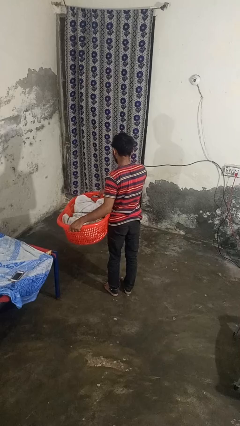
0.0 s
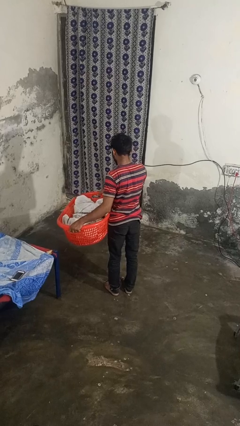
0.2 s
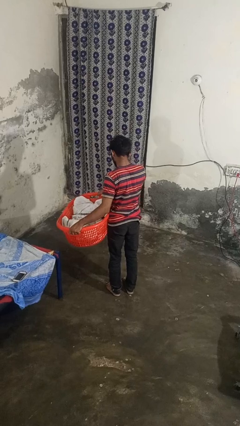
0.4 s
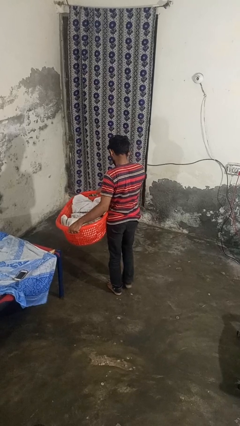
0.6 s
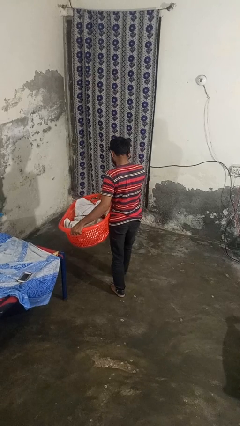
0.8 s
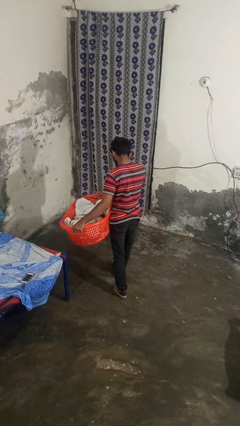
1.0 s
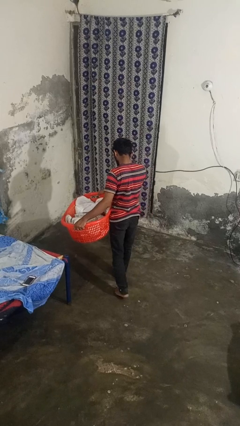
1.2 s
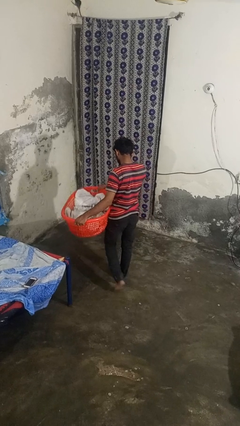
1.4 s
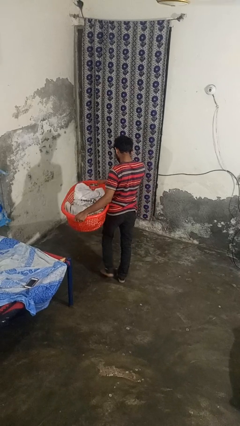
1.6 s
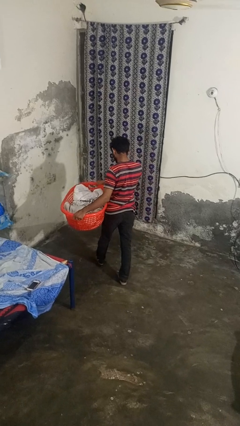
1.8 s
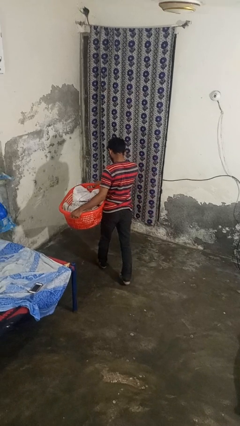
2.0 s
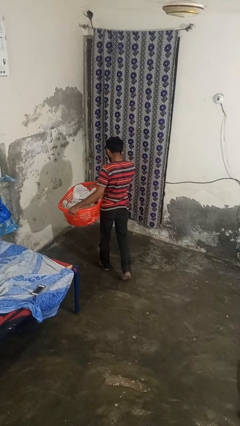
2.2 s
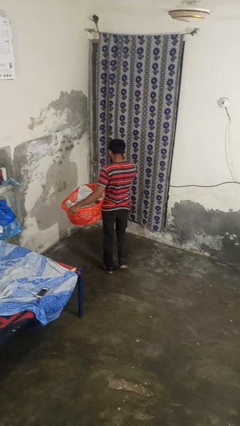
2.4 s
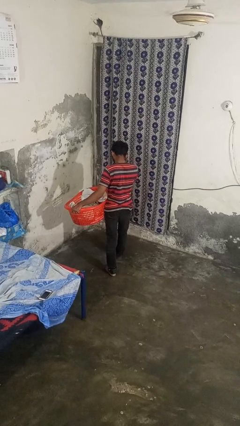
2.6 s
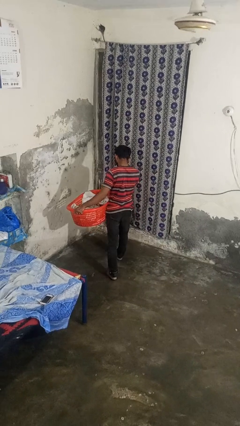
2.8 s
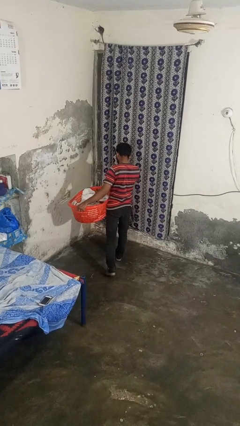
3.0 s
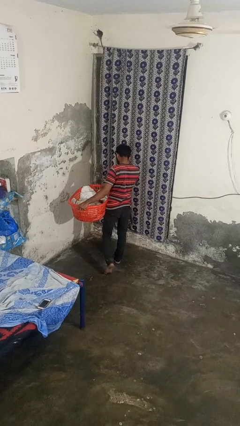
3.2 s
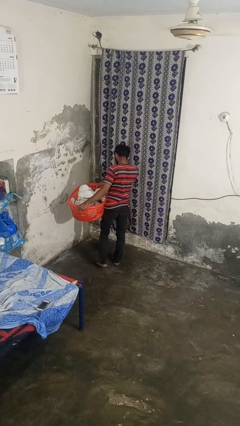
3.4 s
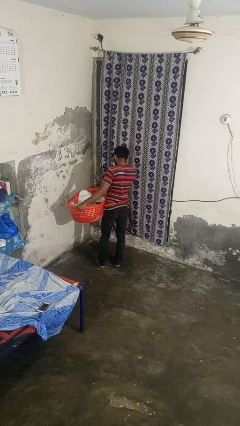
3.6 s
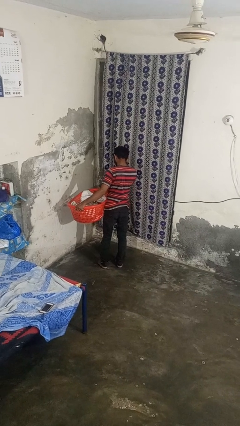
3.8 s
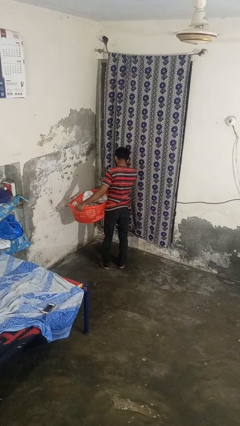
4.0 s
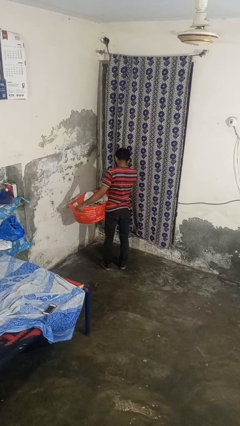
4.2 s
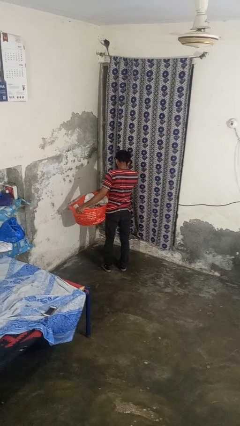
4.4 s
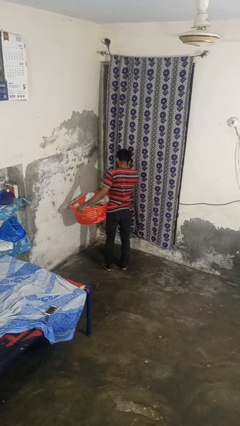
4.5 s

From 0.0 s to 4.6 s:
person carries laundry basket

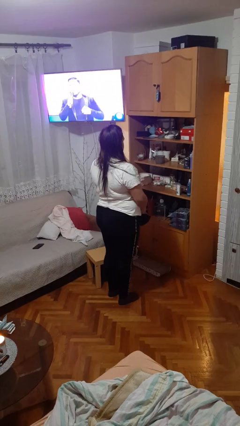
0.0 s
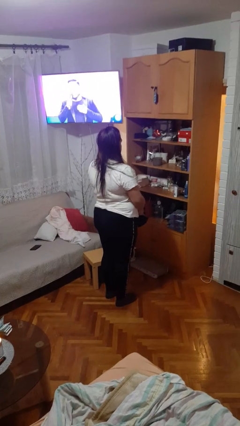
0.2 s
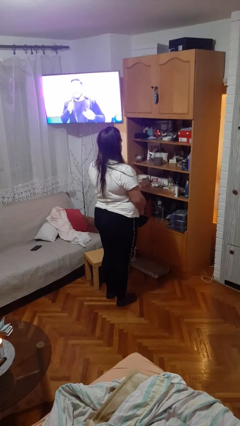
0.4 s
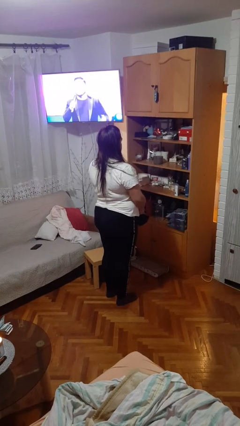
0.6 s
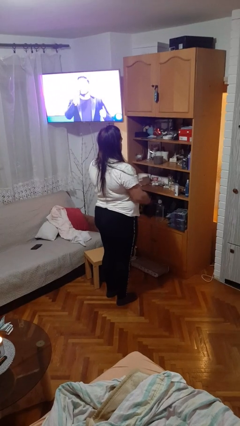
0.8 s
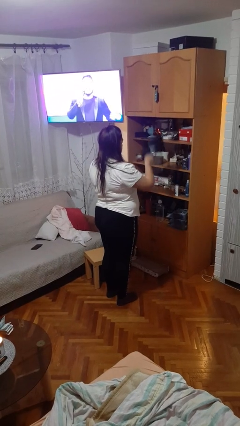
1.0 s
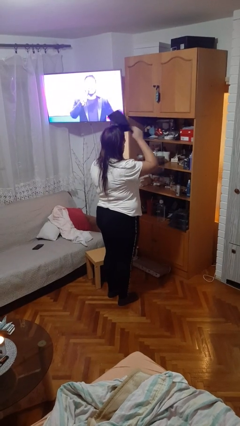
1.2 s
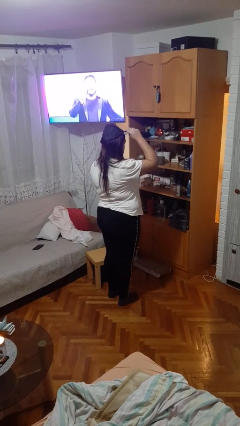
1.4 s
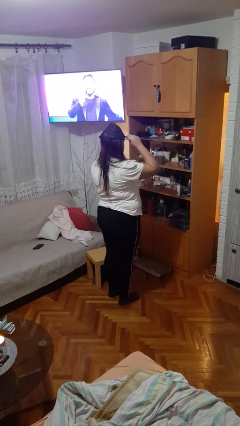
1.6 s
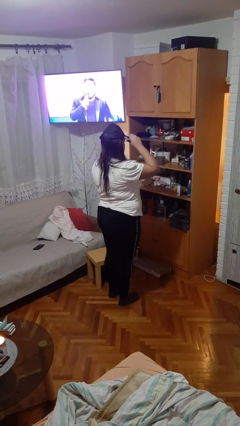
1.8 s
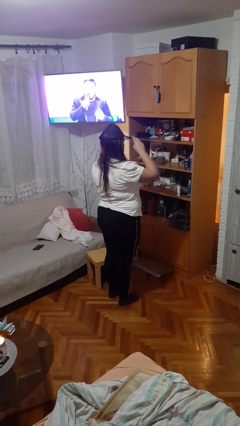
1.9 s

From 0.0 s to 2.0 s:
person puts on hat

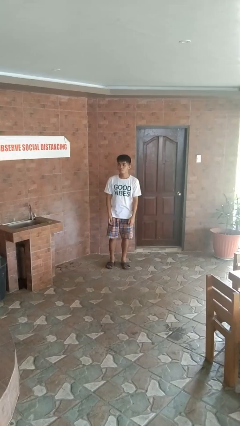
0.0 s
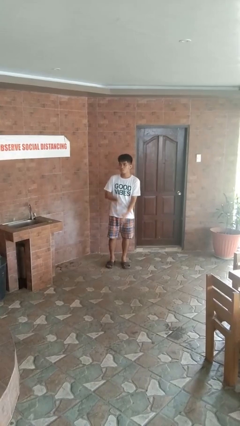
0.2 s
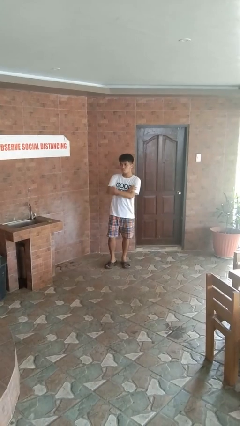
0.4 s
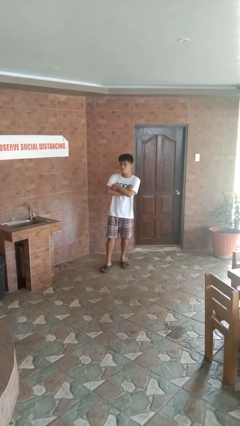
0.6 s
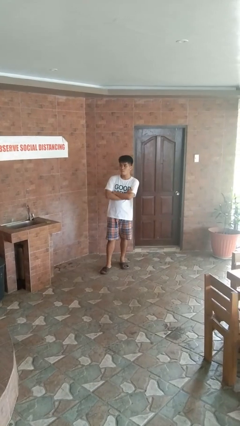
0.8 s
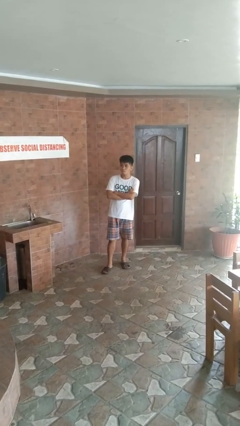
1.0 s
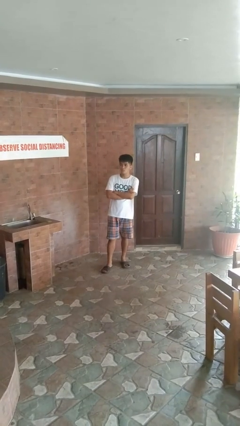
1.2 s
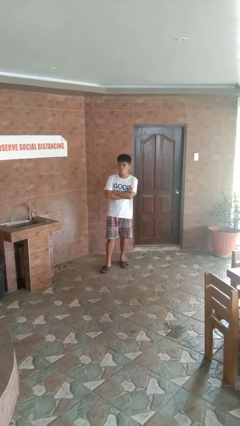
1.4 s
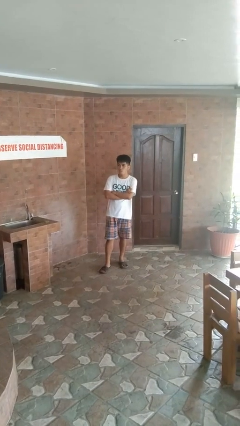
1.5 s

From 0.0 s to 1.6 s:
person crosses arms

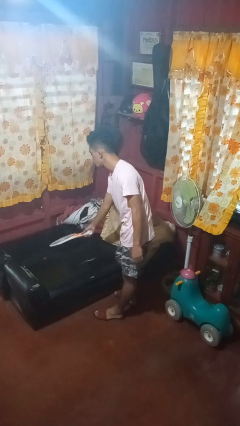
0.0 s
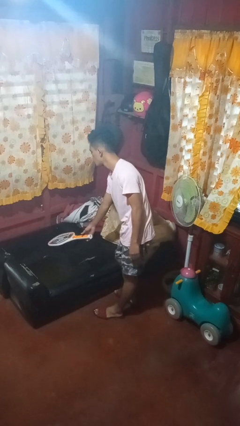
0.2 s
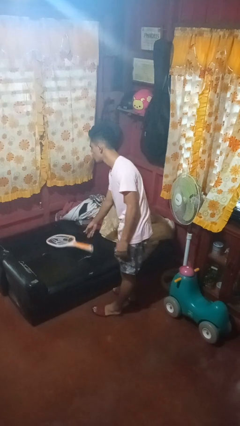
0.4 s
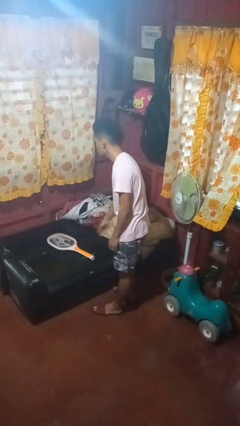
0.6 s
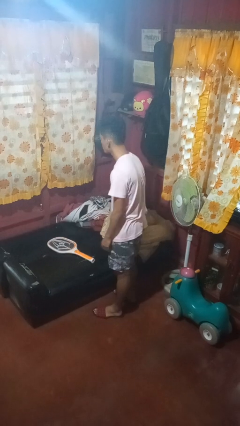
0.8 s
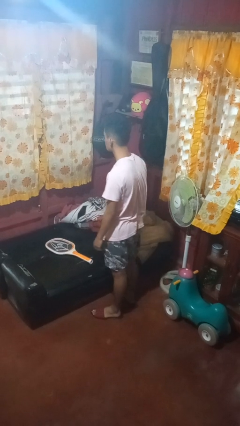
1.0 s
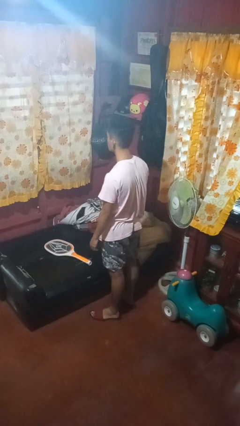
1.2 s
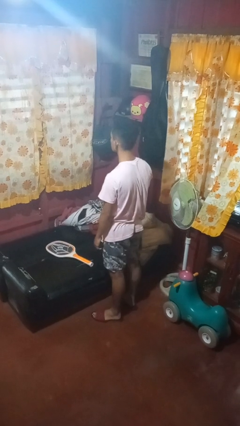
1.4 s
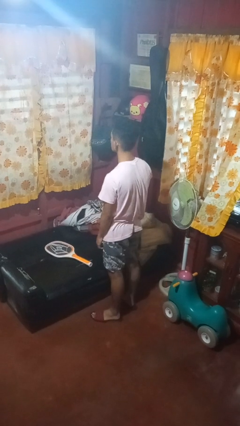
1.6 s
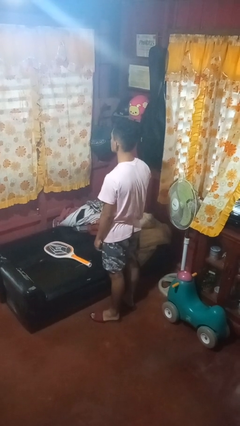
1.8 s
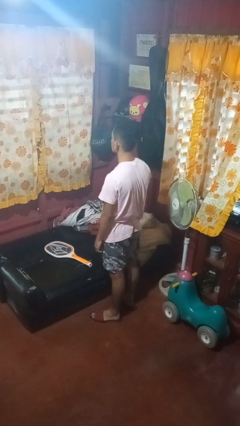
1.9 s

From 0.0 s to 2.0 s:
person puts down object on couch

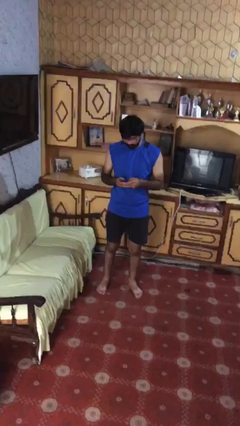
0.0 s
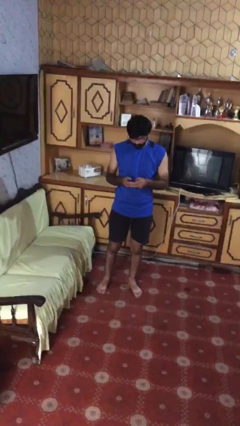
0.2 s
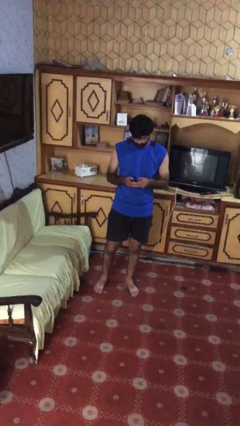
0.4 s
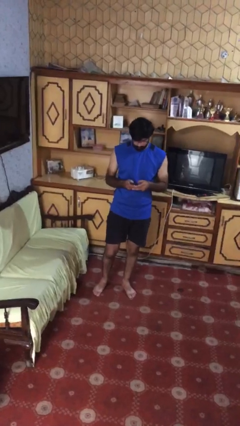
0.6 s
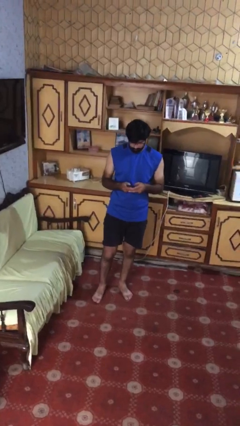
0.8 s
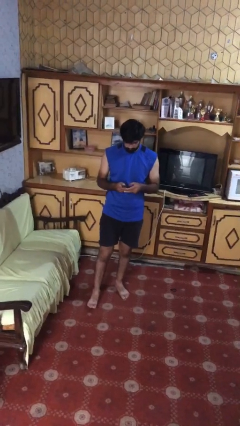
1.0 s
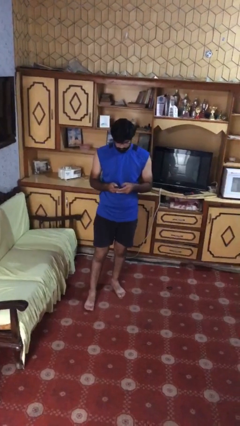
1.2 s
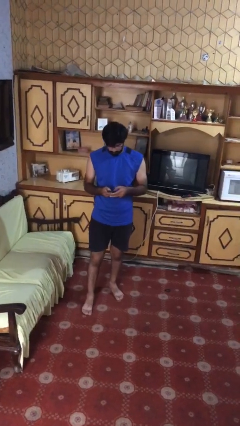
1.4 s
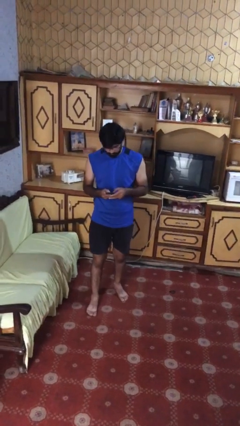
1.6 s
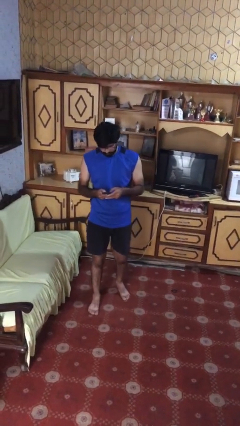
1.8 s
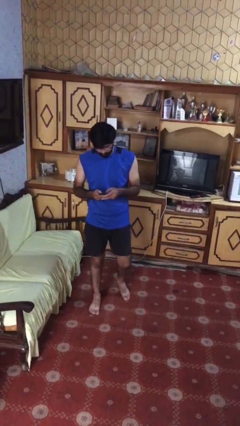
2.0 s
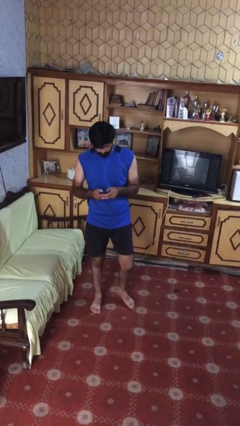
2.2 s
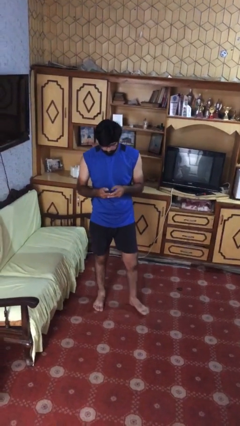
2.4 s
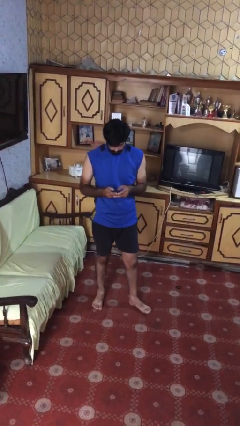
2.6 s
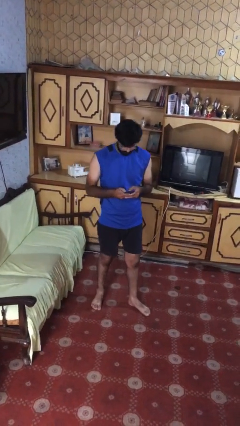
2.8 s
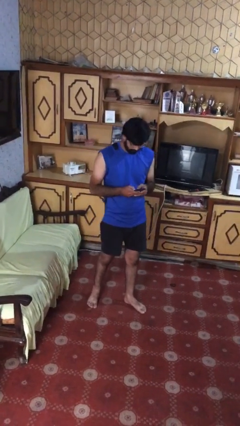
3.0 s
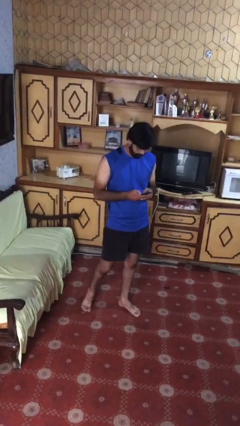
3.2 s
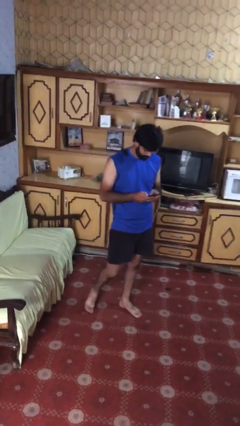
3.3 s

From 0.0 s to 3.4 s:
person texts on phone

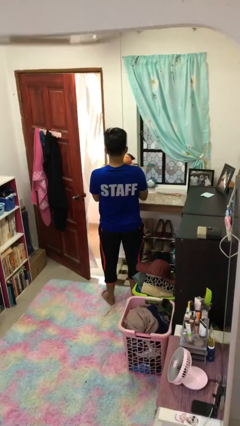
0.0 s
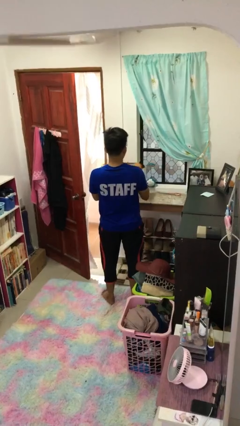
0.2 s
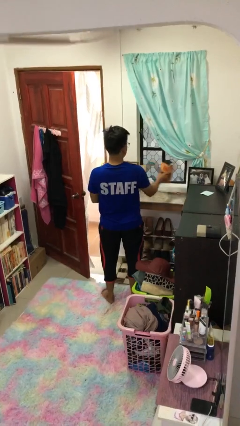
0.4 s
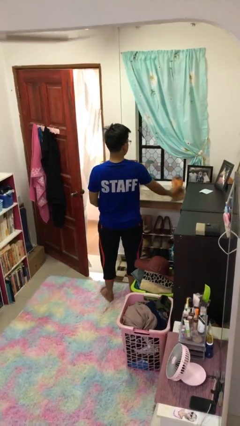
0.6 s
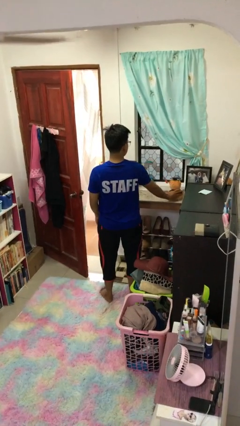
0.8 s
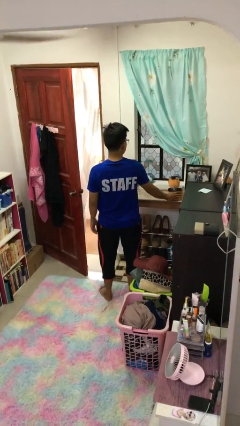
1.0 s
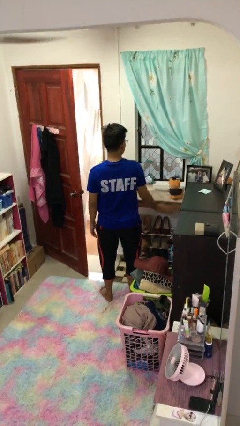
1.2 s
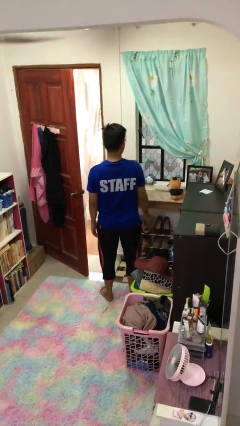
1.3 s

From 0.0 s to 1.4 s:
person puts down object on countertop

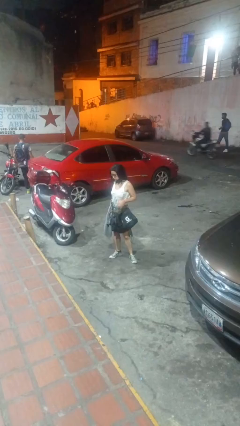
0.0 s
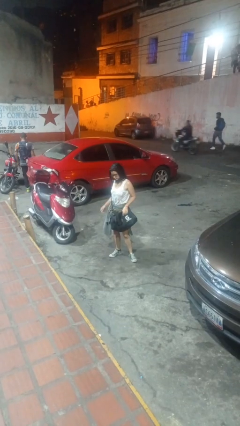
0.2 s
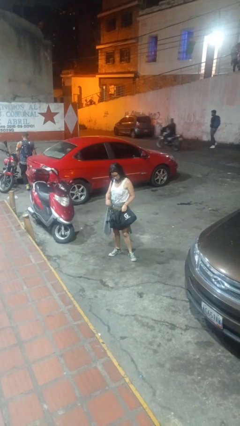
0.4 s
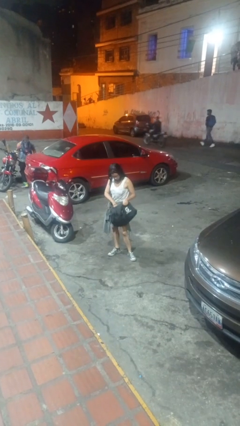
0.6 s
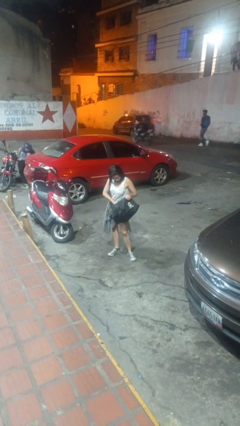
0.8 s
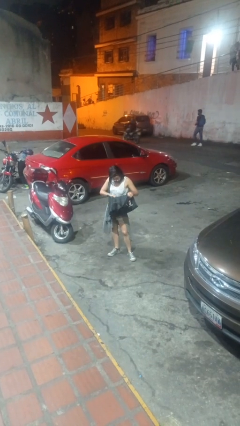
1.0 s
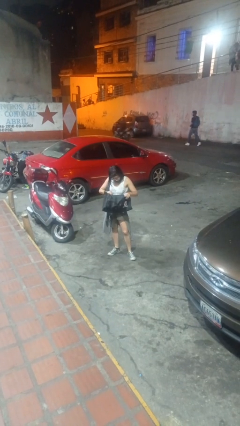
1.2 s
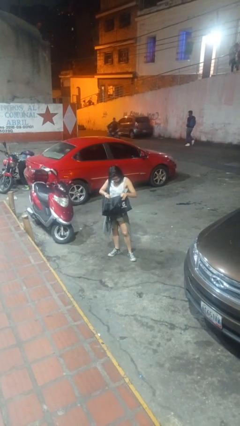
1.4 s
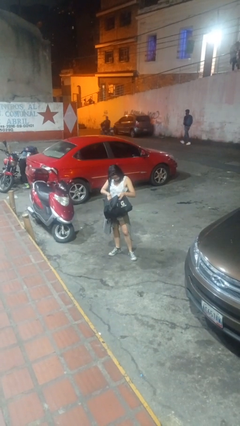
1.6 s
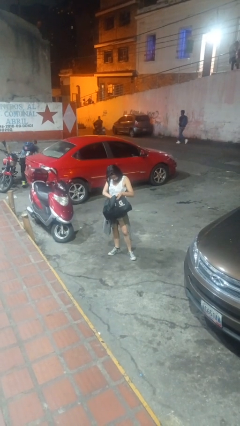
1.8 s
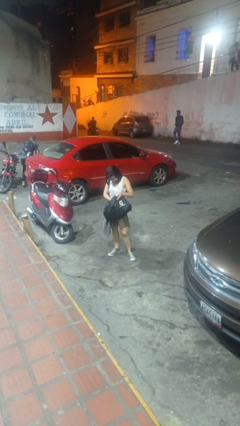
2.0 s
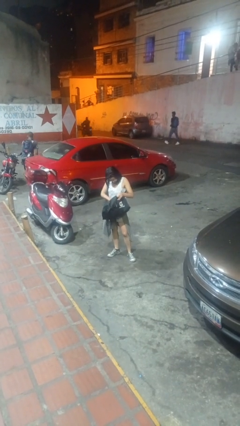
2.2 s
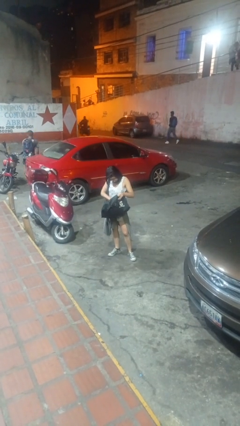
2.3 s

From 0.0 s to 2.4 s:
person searches in purse
